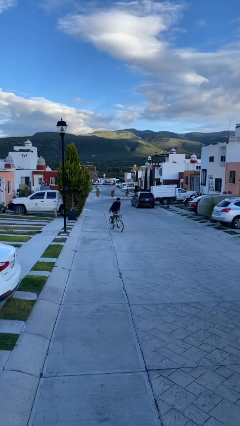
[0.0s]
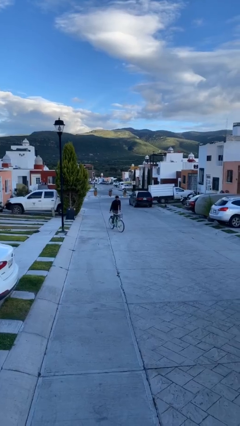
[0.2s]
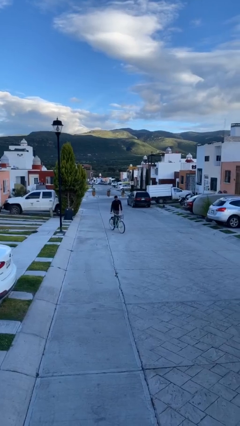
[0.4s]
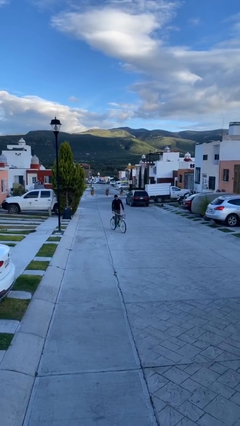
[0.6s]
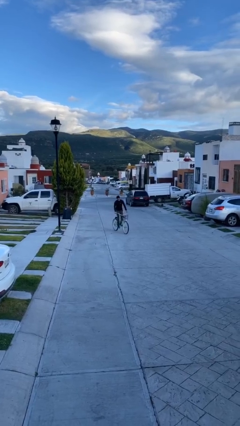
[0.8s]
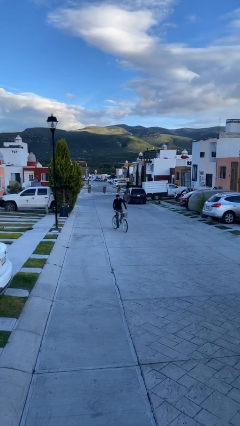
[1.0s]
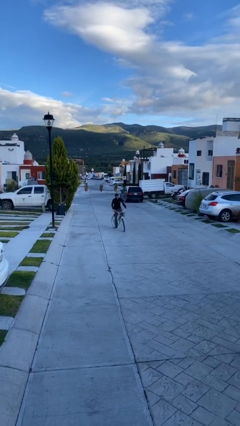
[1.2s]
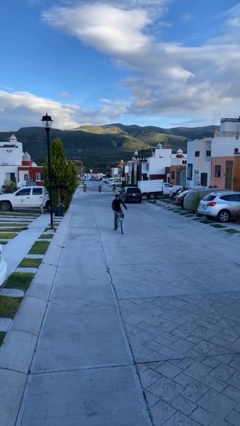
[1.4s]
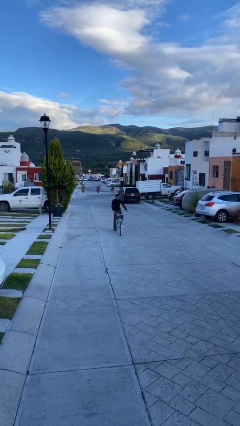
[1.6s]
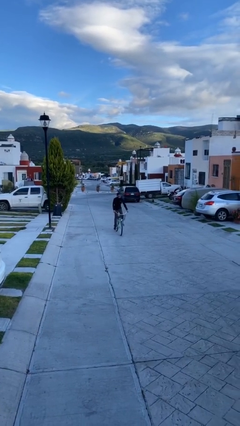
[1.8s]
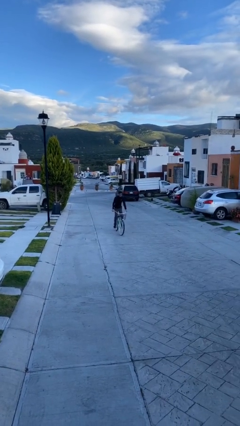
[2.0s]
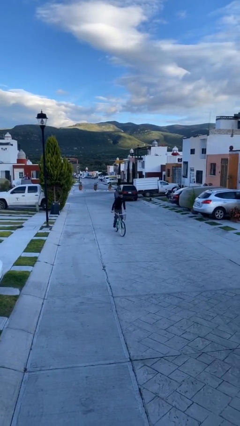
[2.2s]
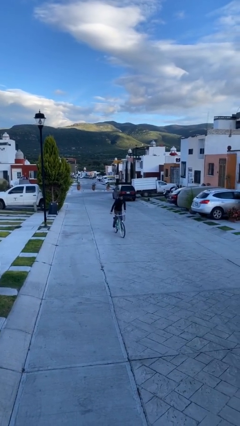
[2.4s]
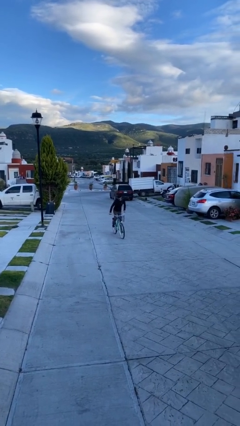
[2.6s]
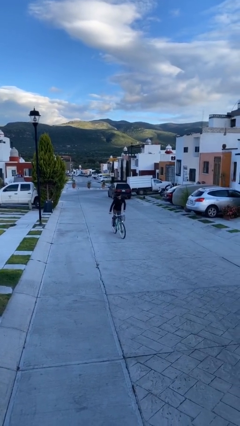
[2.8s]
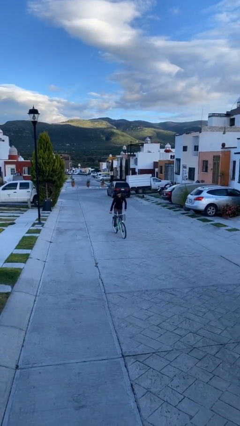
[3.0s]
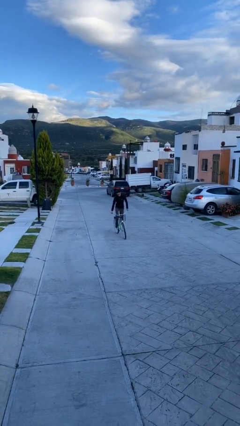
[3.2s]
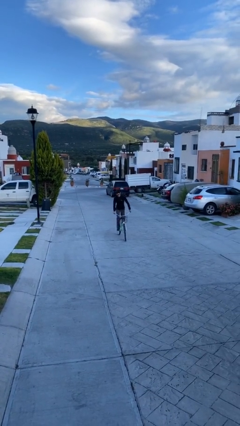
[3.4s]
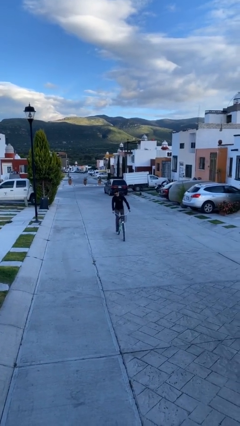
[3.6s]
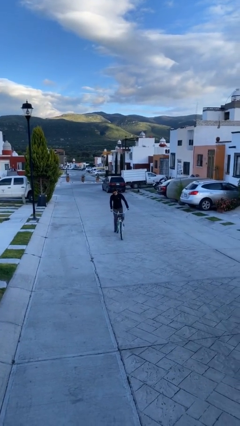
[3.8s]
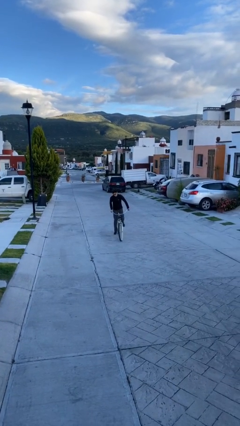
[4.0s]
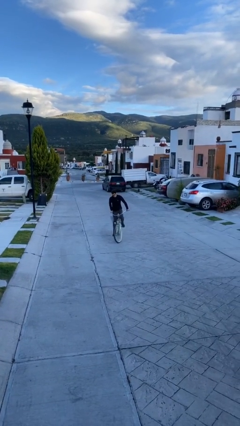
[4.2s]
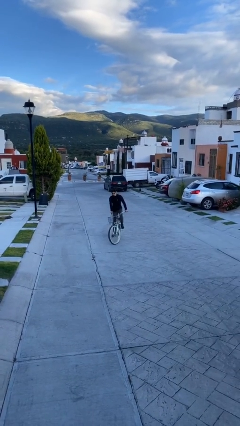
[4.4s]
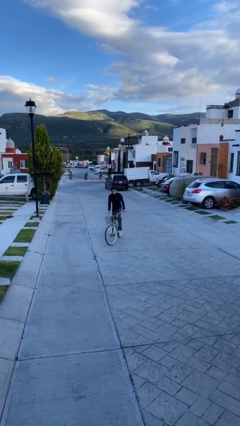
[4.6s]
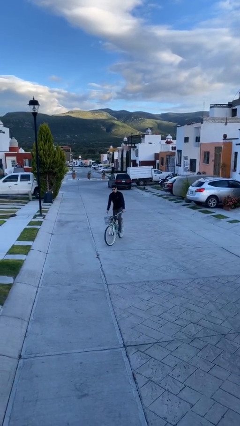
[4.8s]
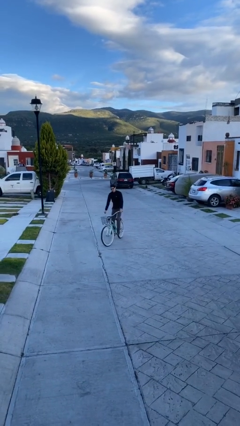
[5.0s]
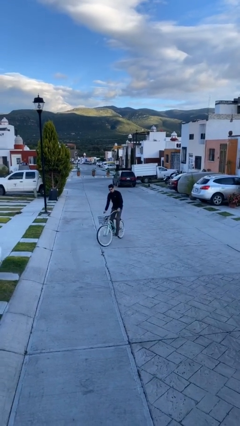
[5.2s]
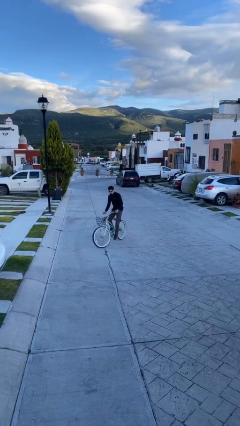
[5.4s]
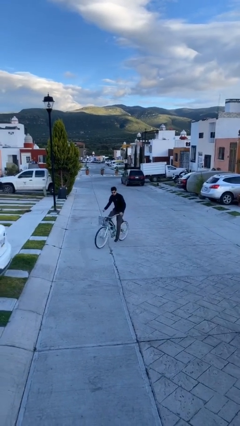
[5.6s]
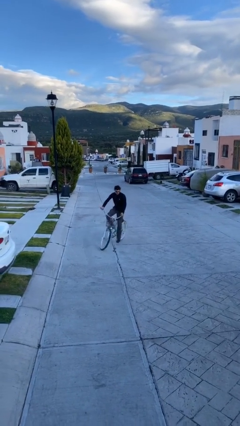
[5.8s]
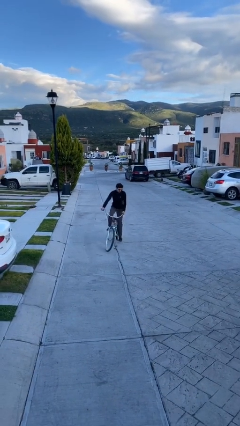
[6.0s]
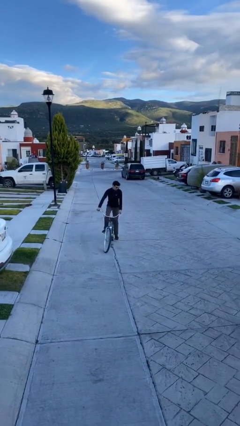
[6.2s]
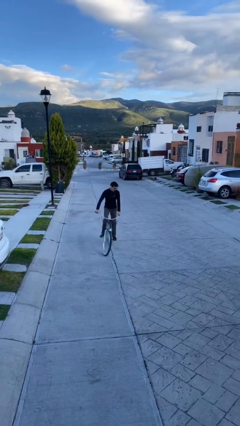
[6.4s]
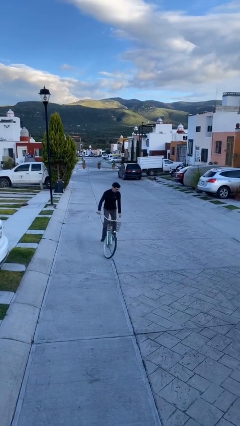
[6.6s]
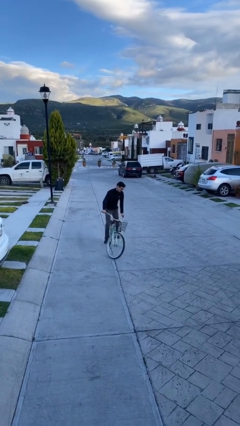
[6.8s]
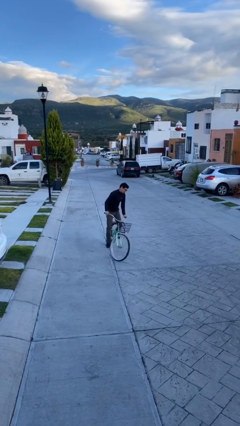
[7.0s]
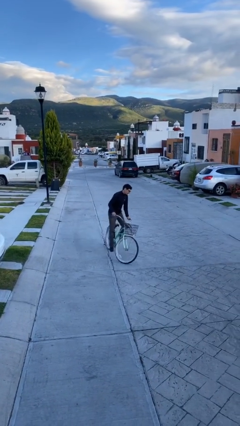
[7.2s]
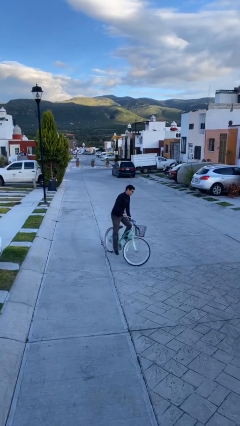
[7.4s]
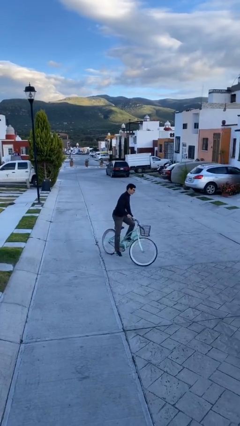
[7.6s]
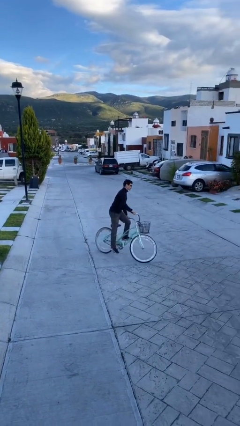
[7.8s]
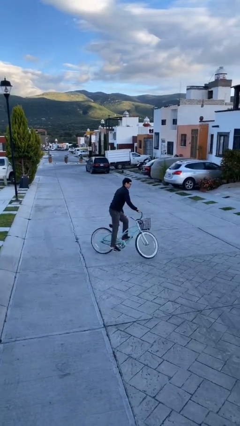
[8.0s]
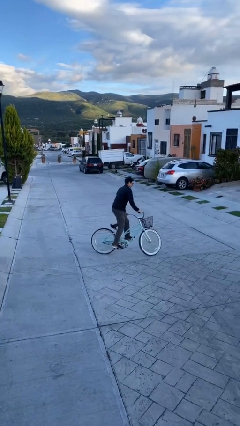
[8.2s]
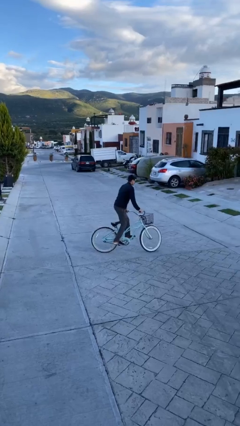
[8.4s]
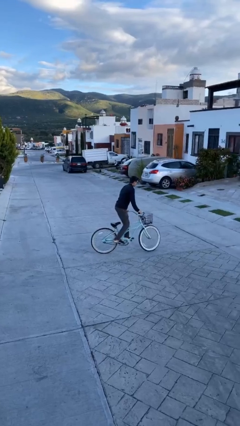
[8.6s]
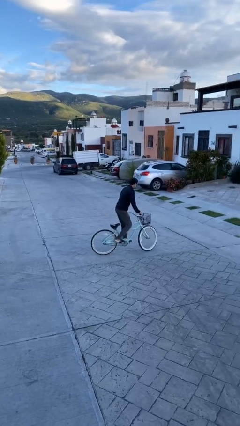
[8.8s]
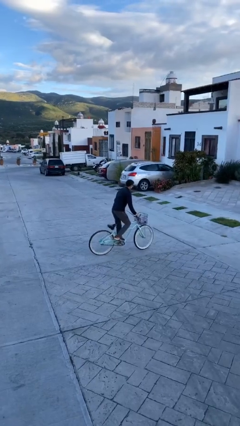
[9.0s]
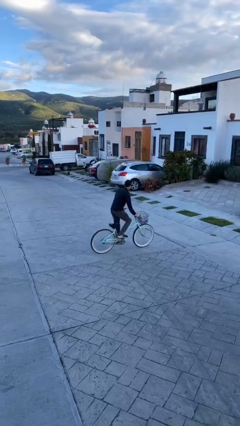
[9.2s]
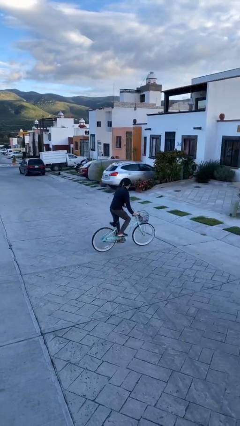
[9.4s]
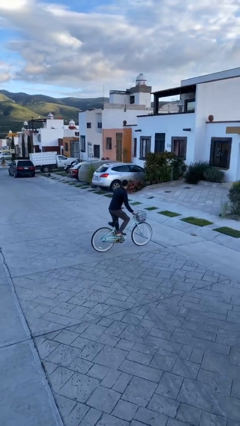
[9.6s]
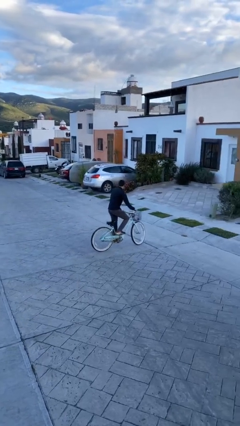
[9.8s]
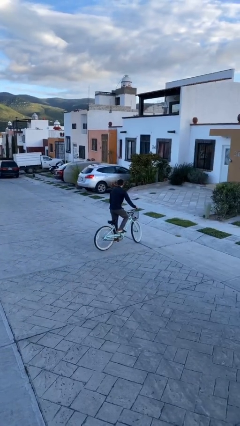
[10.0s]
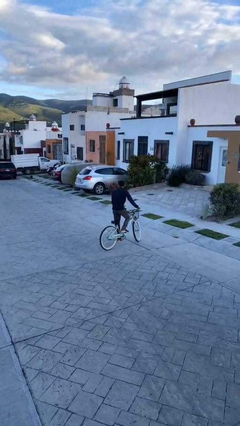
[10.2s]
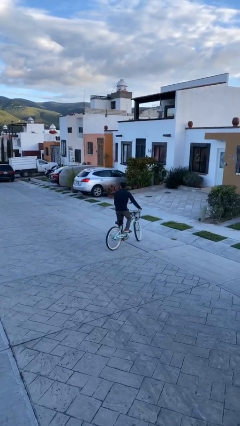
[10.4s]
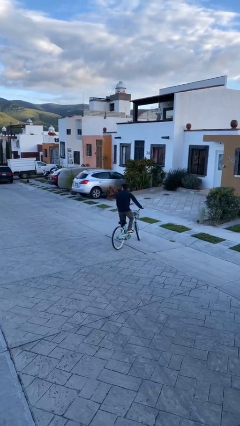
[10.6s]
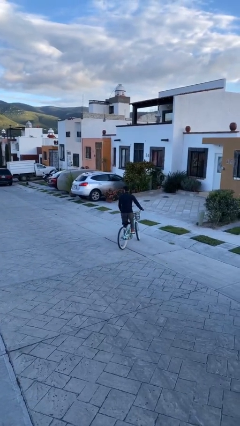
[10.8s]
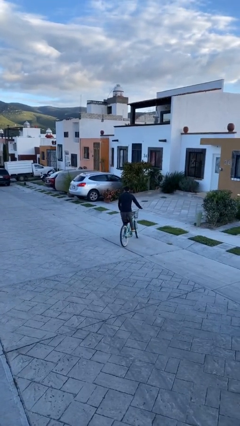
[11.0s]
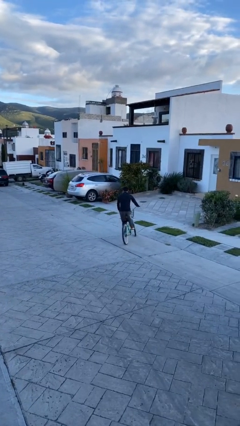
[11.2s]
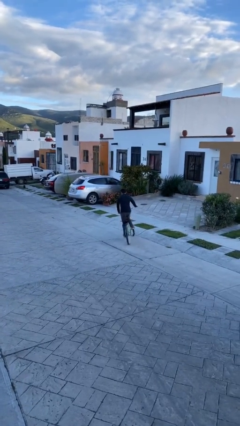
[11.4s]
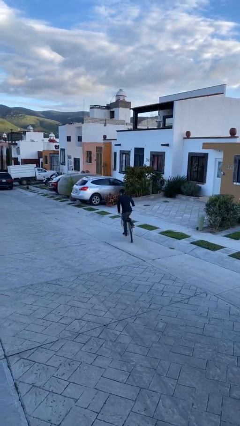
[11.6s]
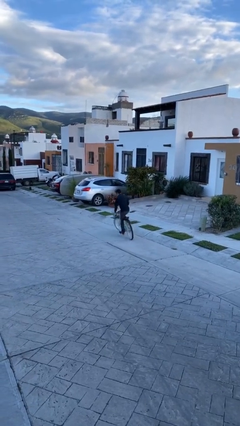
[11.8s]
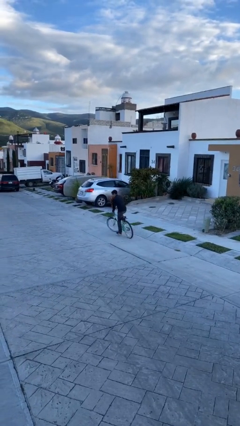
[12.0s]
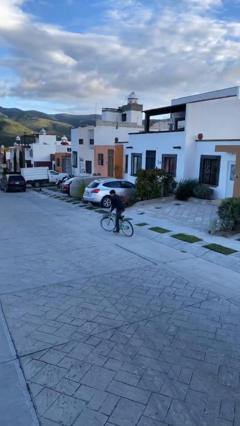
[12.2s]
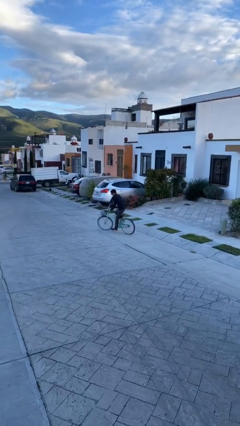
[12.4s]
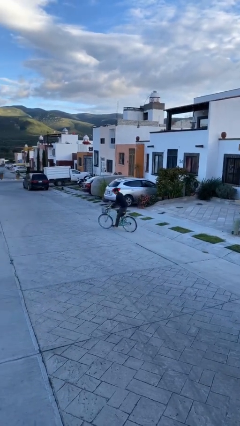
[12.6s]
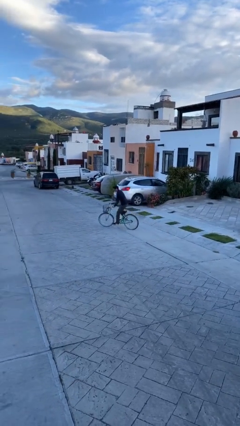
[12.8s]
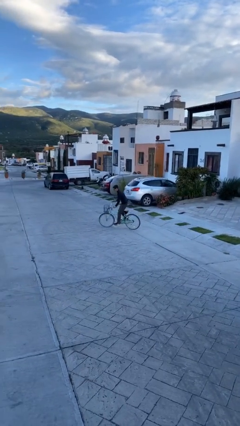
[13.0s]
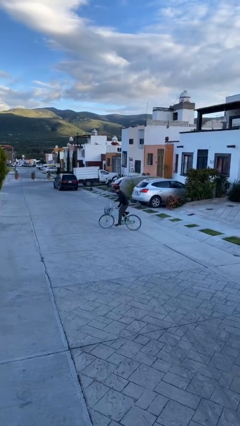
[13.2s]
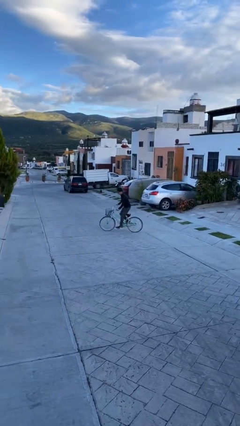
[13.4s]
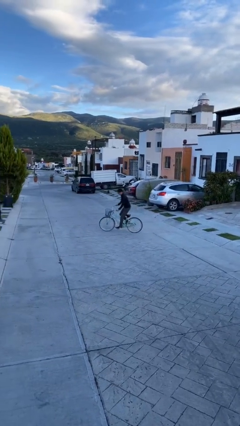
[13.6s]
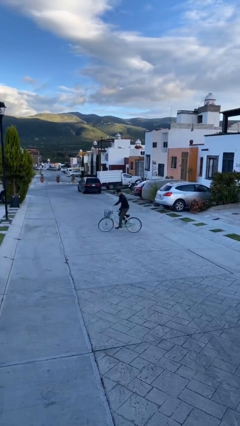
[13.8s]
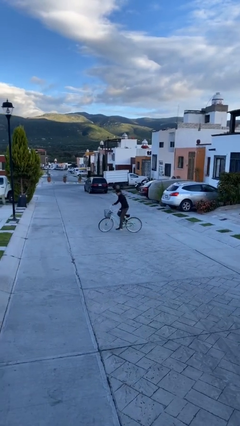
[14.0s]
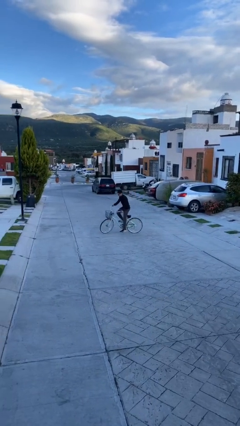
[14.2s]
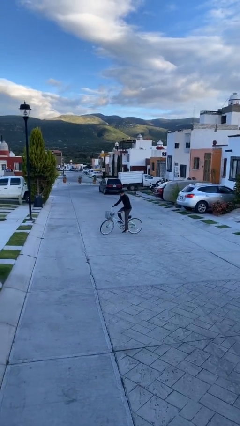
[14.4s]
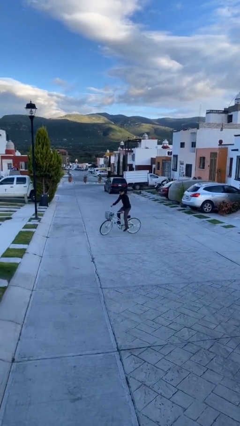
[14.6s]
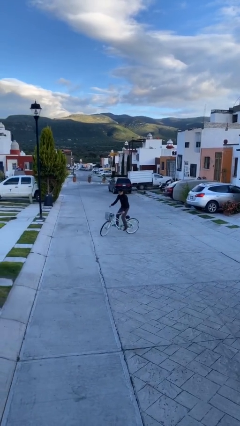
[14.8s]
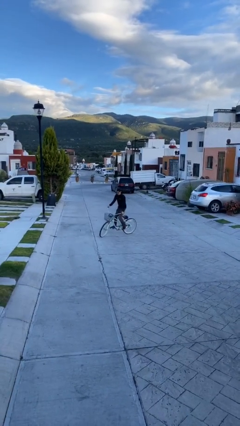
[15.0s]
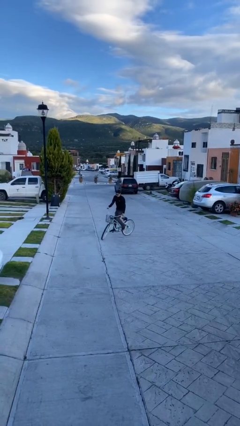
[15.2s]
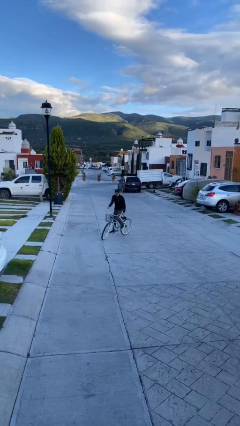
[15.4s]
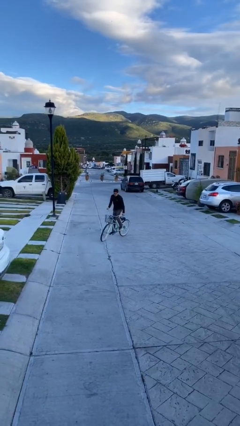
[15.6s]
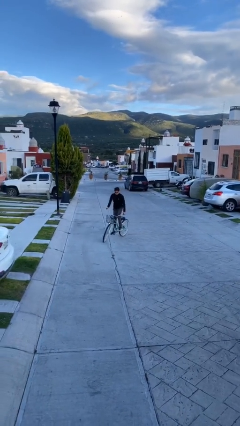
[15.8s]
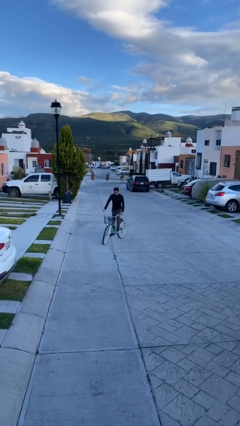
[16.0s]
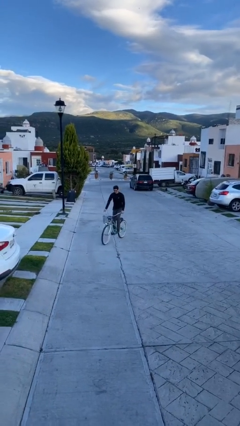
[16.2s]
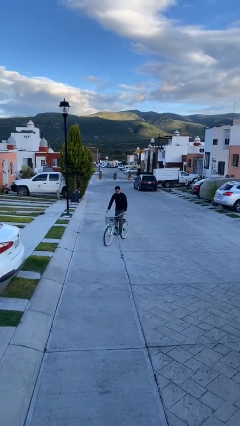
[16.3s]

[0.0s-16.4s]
person rides bicycle

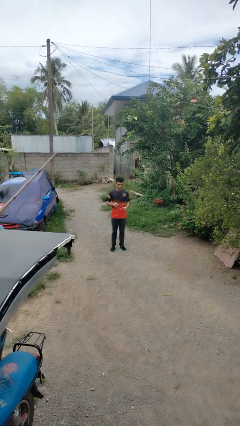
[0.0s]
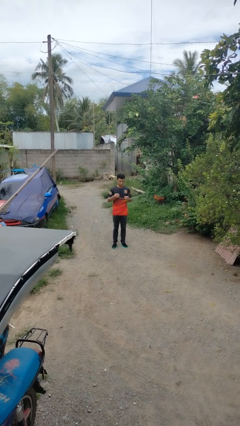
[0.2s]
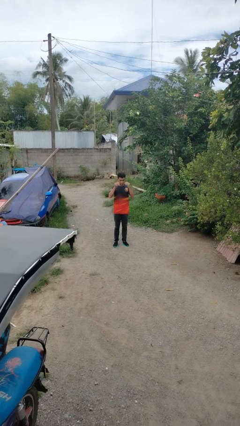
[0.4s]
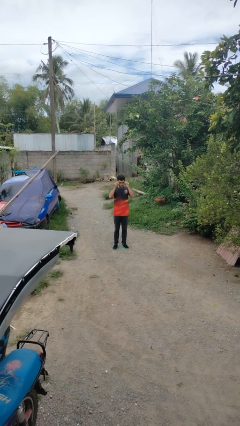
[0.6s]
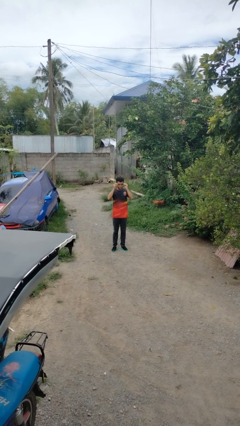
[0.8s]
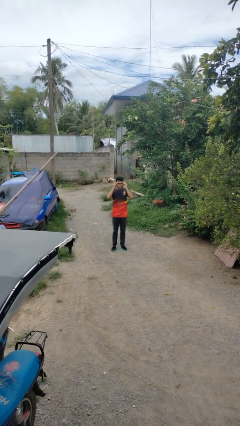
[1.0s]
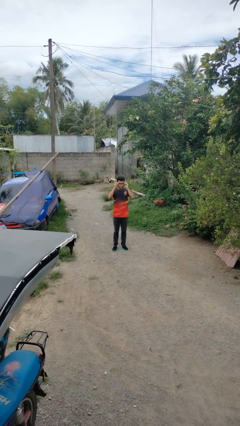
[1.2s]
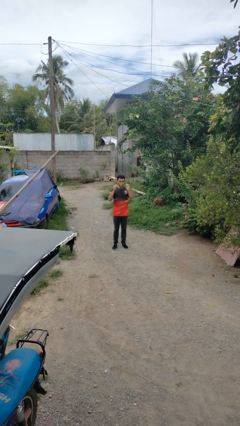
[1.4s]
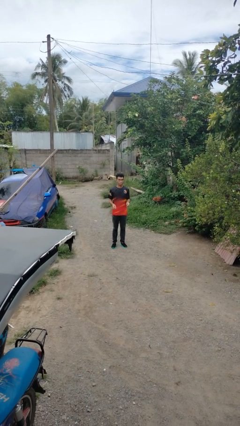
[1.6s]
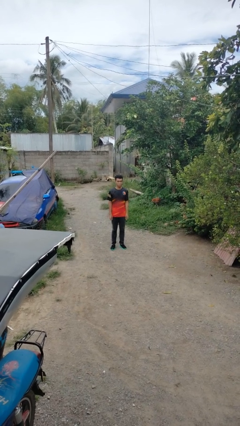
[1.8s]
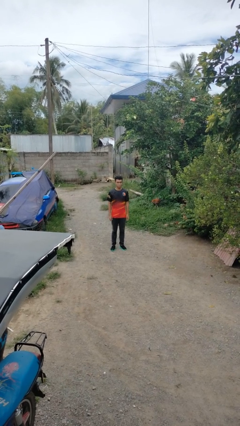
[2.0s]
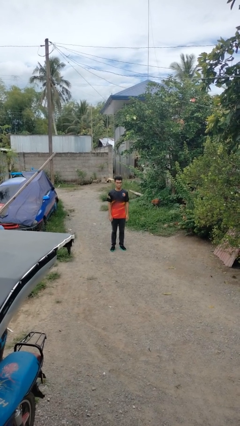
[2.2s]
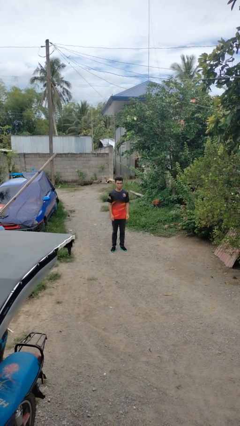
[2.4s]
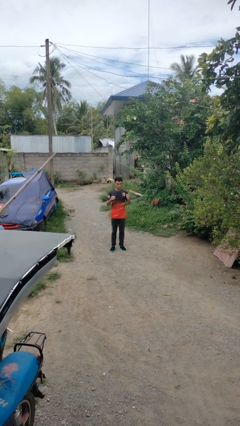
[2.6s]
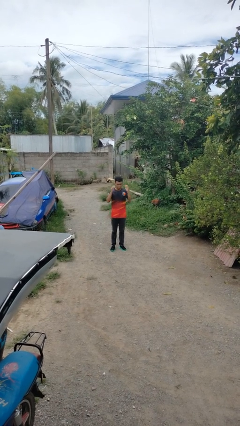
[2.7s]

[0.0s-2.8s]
person puts on glasses
